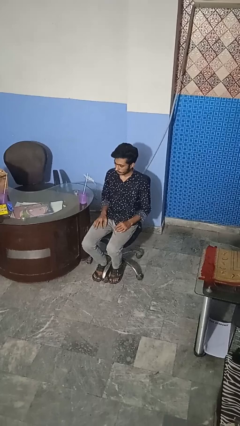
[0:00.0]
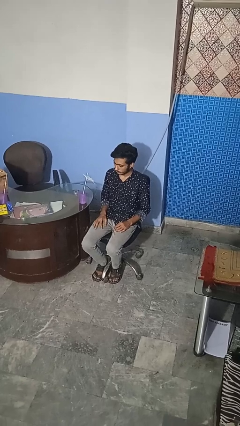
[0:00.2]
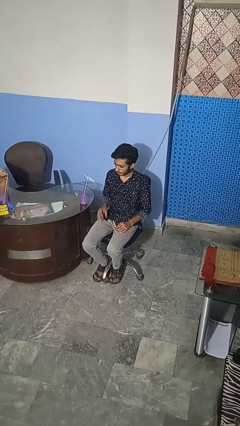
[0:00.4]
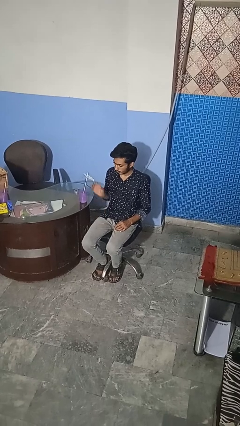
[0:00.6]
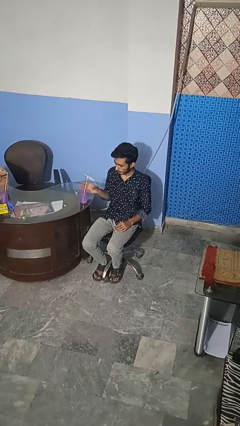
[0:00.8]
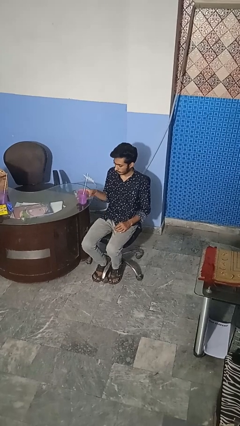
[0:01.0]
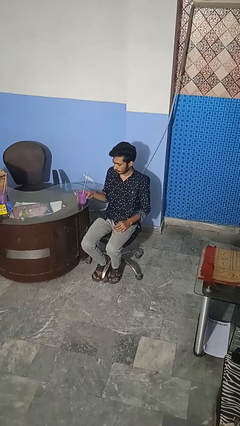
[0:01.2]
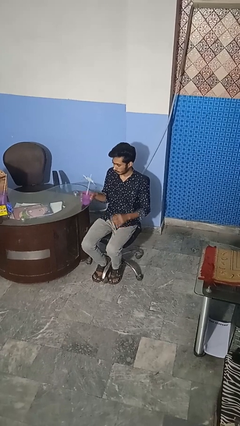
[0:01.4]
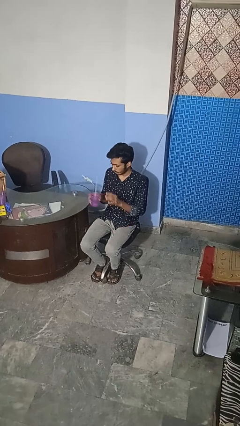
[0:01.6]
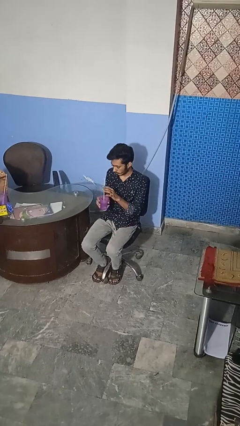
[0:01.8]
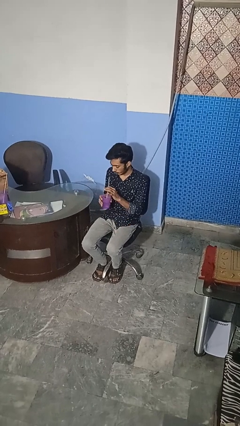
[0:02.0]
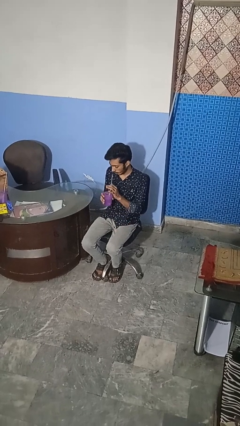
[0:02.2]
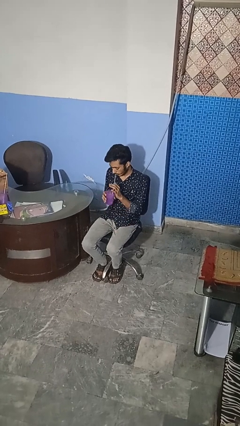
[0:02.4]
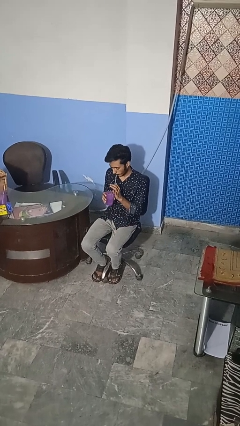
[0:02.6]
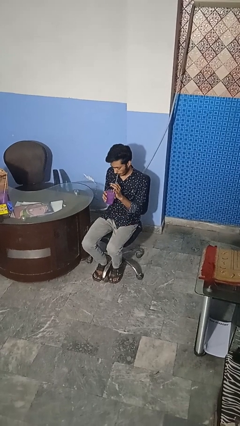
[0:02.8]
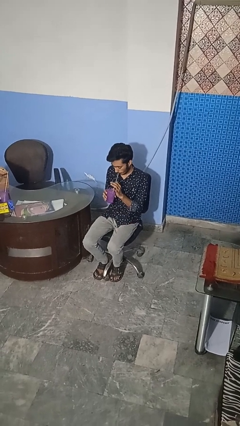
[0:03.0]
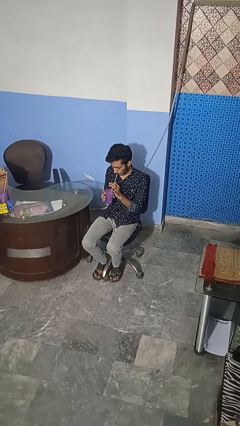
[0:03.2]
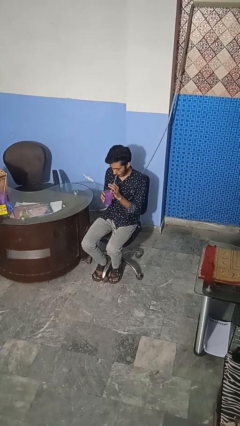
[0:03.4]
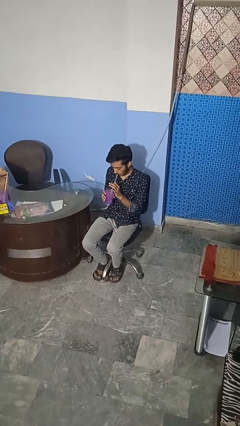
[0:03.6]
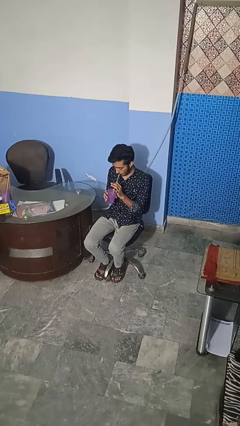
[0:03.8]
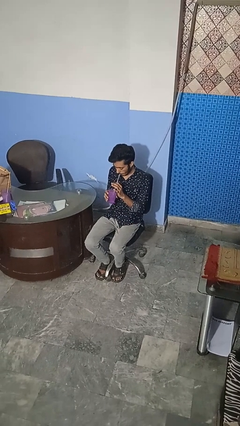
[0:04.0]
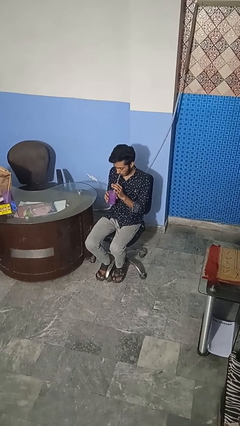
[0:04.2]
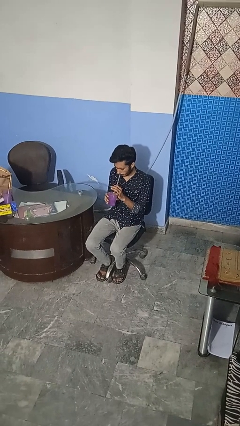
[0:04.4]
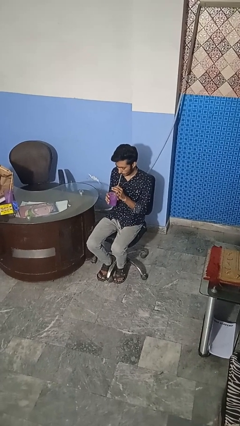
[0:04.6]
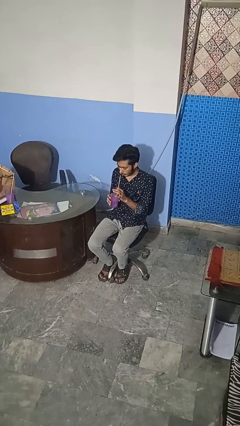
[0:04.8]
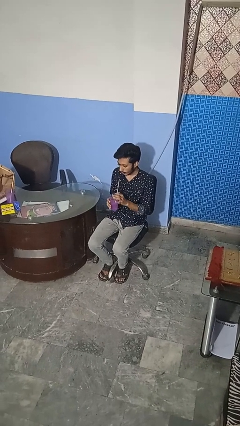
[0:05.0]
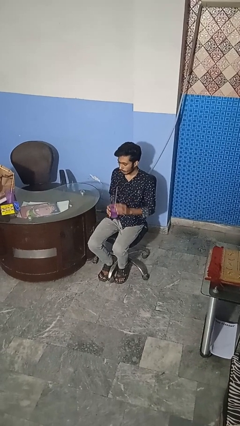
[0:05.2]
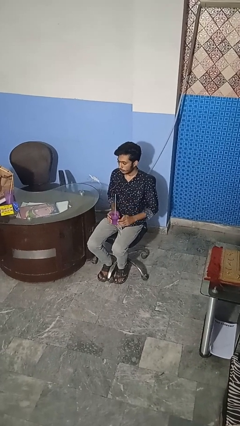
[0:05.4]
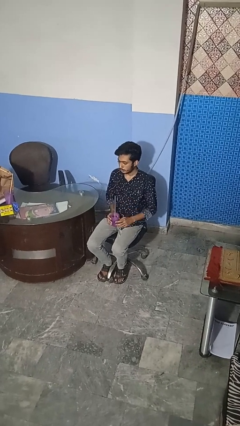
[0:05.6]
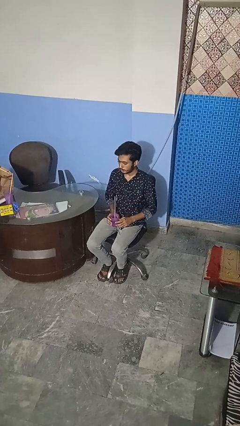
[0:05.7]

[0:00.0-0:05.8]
person drinks from straw

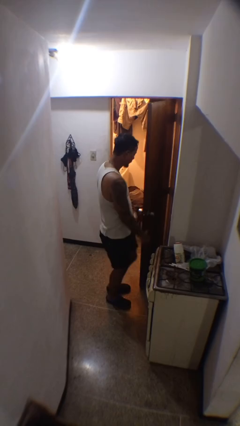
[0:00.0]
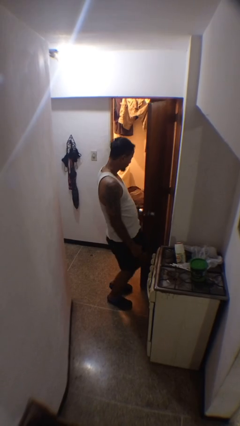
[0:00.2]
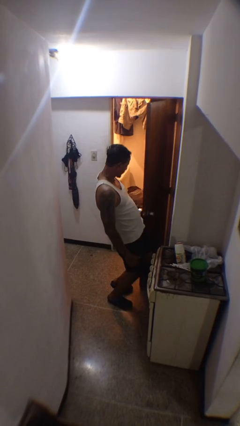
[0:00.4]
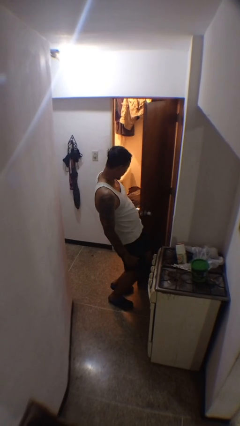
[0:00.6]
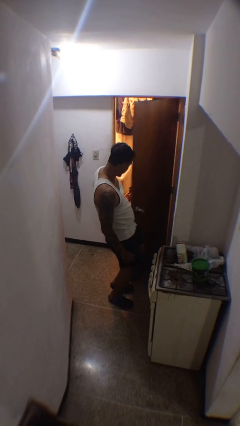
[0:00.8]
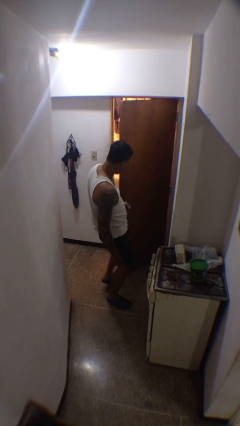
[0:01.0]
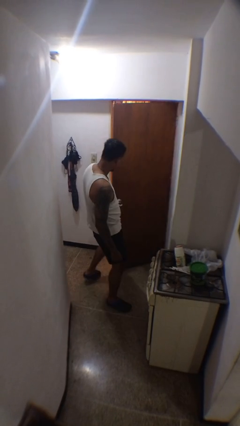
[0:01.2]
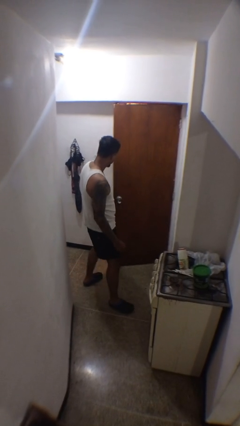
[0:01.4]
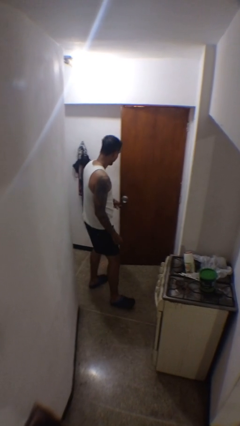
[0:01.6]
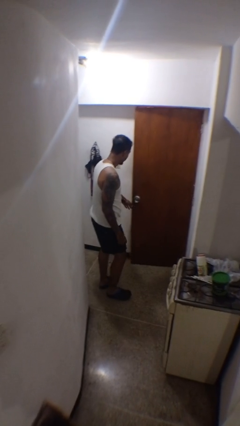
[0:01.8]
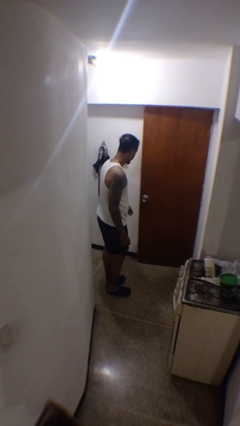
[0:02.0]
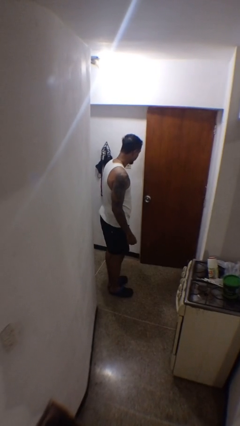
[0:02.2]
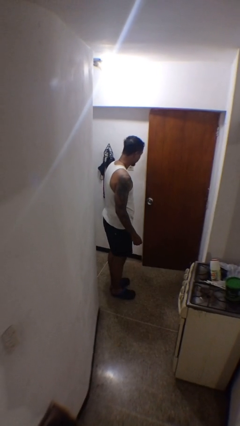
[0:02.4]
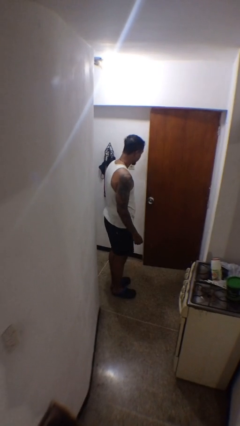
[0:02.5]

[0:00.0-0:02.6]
person closes door with hip

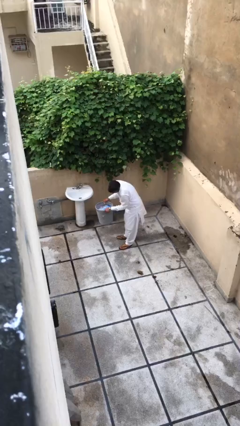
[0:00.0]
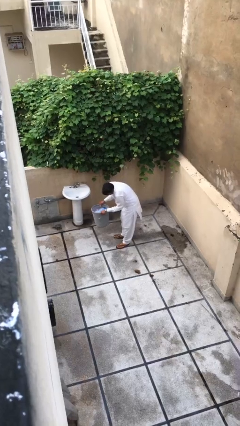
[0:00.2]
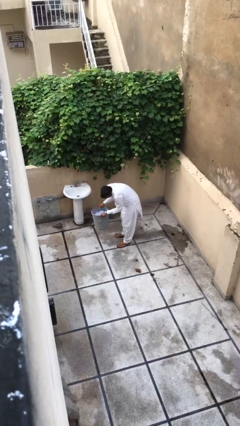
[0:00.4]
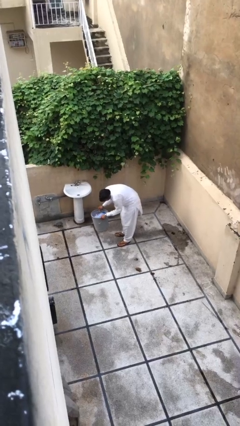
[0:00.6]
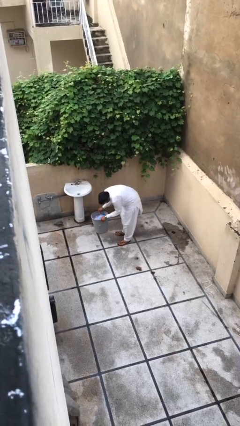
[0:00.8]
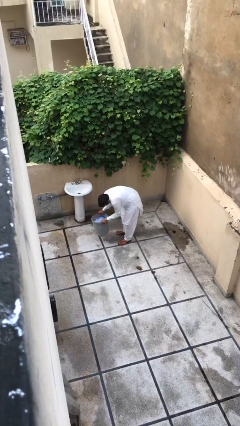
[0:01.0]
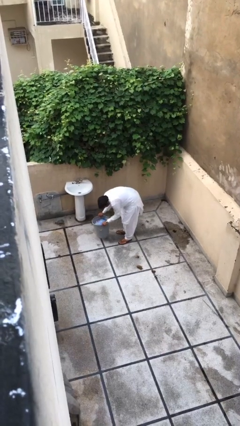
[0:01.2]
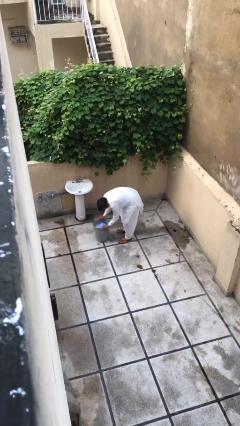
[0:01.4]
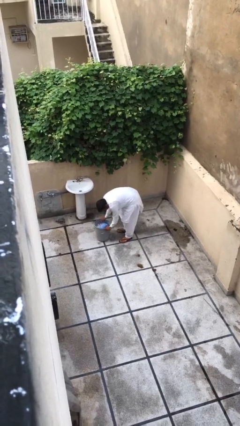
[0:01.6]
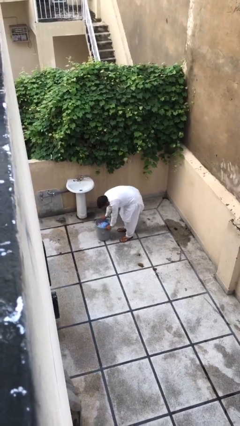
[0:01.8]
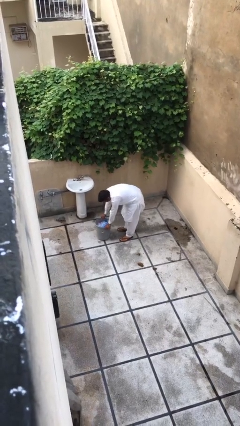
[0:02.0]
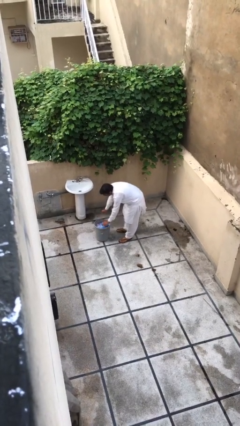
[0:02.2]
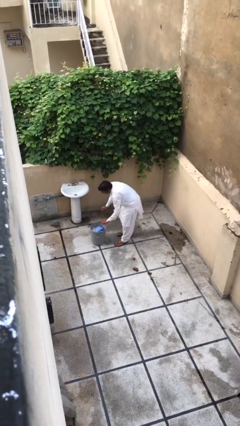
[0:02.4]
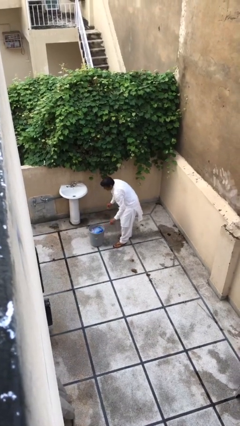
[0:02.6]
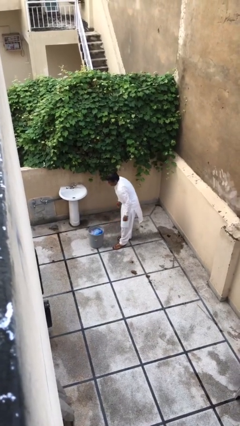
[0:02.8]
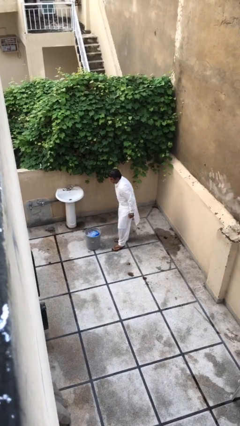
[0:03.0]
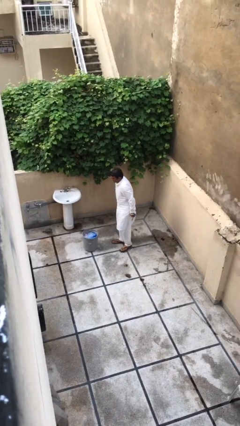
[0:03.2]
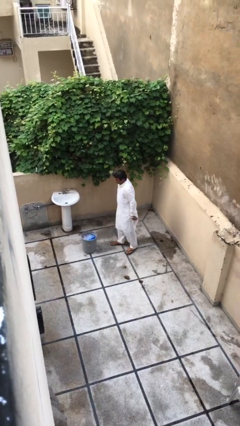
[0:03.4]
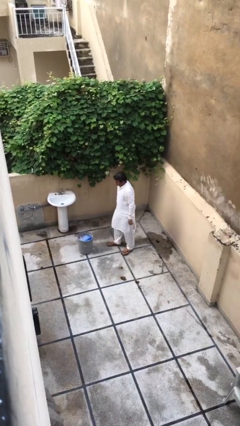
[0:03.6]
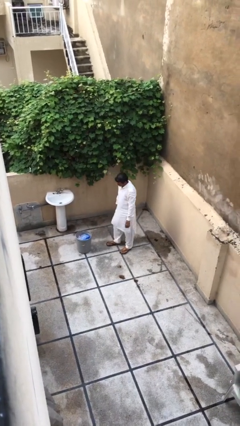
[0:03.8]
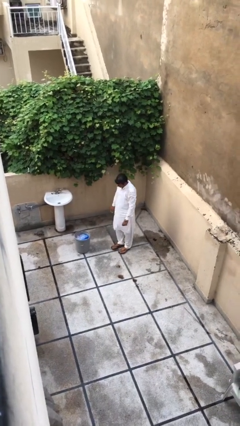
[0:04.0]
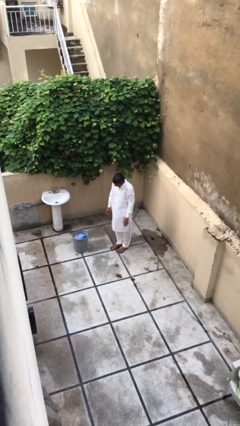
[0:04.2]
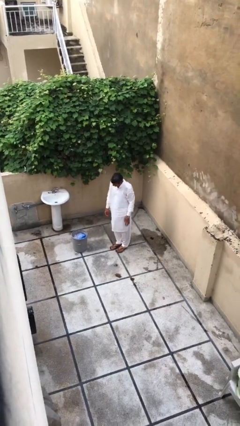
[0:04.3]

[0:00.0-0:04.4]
person puts down object on floor

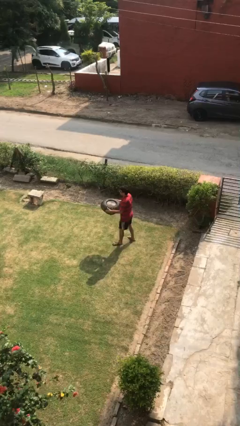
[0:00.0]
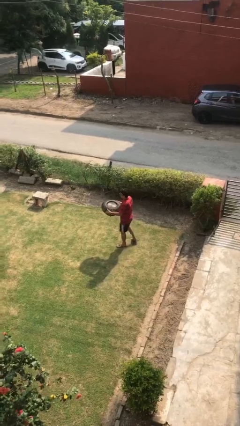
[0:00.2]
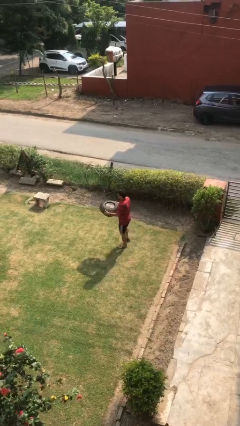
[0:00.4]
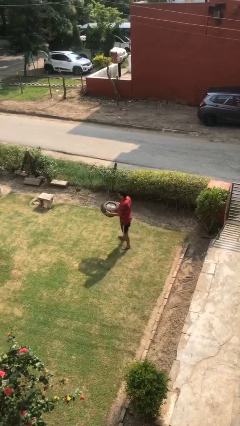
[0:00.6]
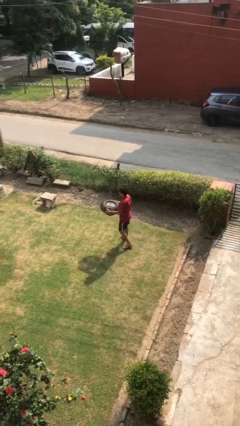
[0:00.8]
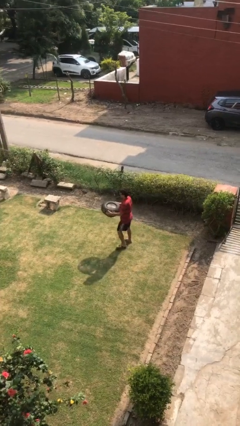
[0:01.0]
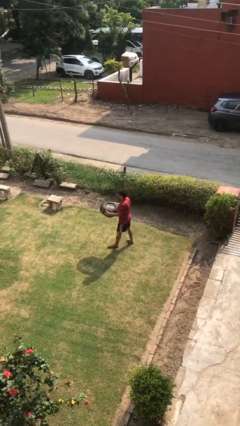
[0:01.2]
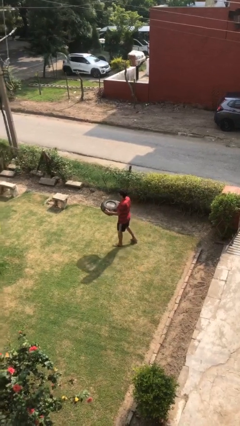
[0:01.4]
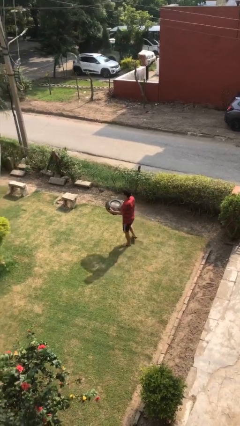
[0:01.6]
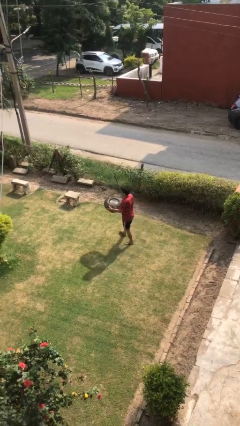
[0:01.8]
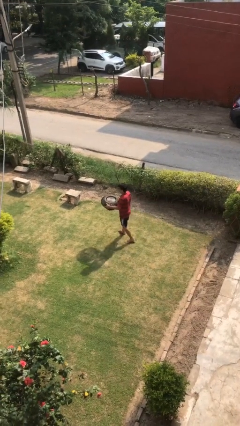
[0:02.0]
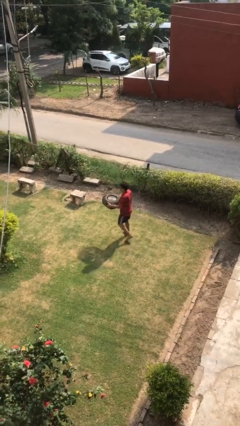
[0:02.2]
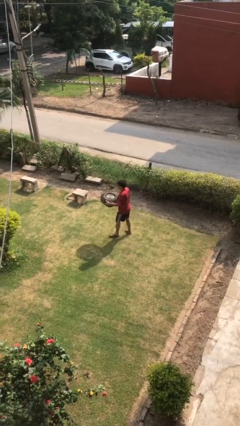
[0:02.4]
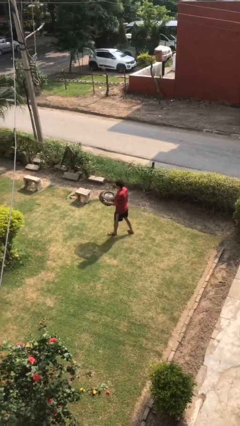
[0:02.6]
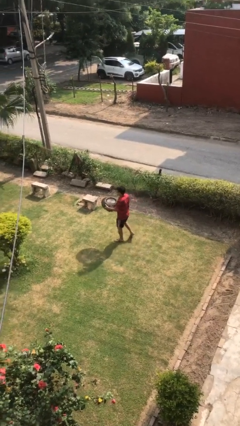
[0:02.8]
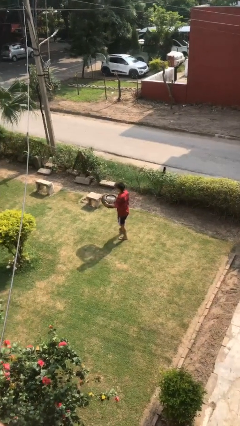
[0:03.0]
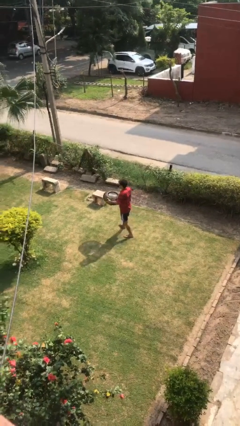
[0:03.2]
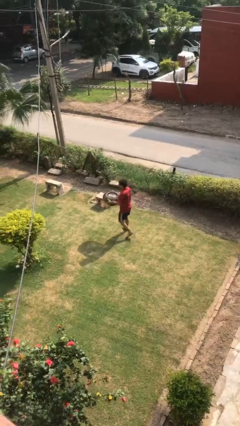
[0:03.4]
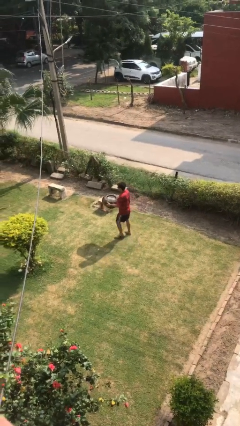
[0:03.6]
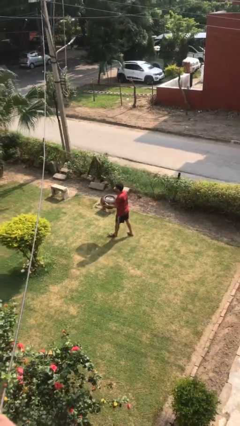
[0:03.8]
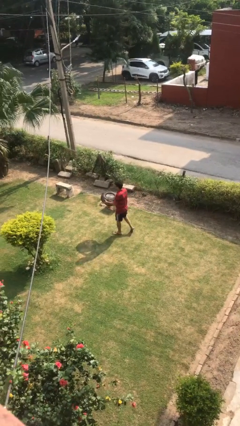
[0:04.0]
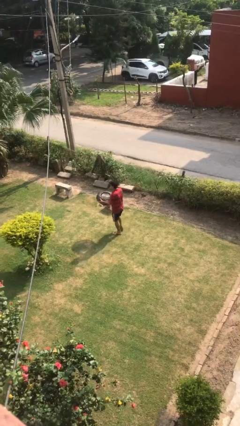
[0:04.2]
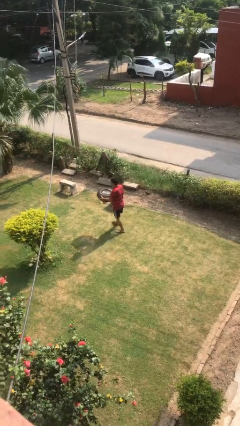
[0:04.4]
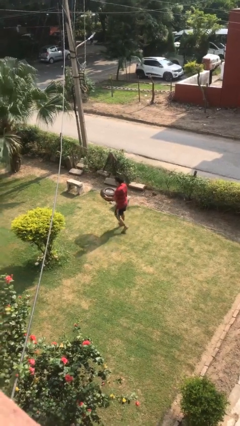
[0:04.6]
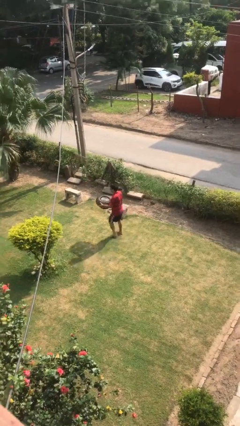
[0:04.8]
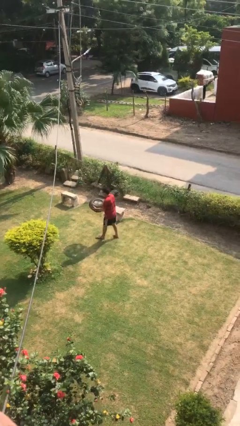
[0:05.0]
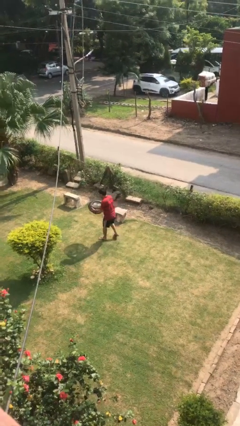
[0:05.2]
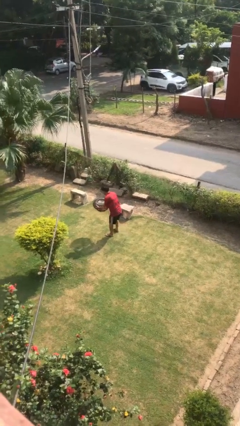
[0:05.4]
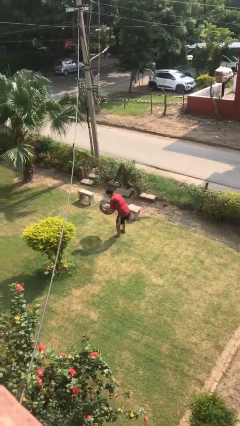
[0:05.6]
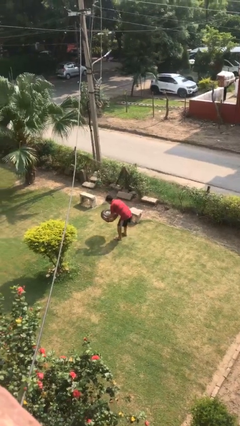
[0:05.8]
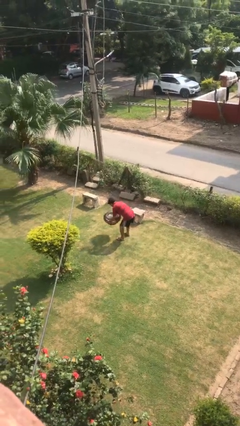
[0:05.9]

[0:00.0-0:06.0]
person carries heavy object
